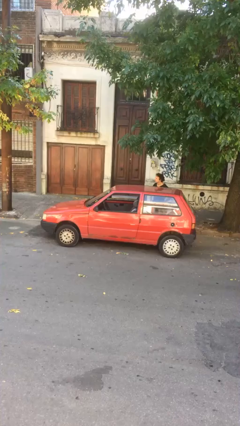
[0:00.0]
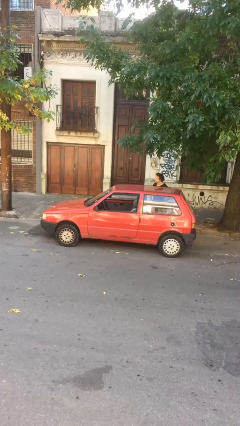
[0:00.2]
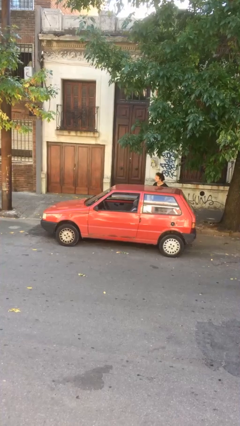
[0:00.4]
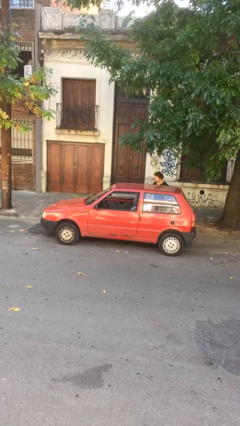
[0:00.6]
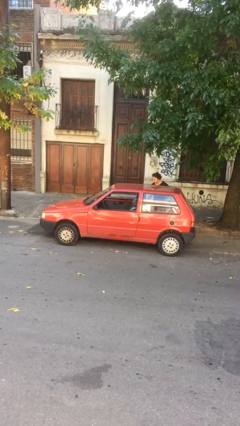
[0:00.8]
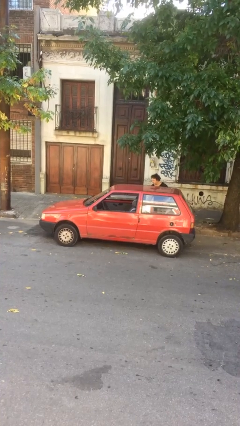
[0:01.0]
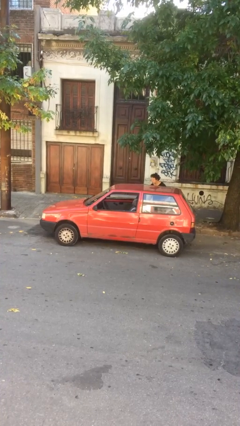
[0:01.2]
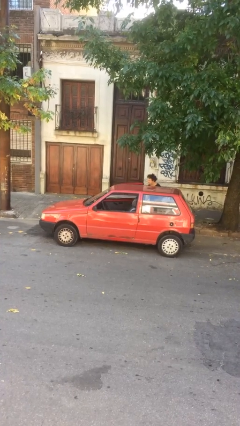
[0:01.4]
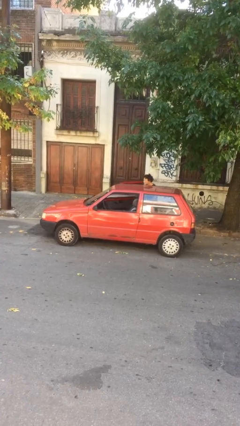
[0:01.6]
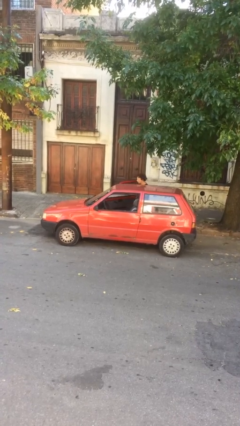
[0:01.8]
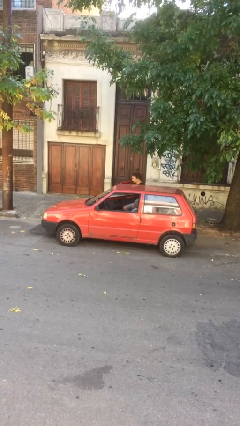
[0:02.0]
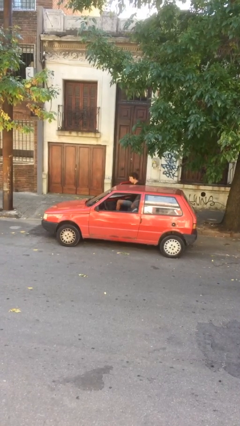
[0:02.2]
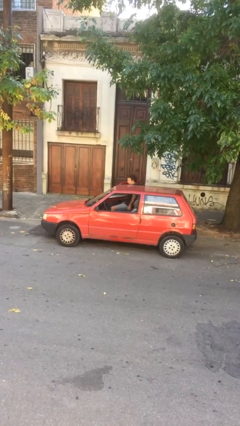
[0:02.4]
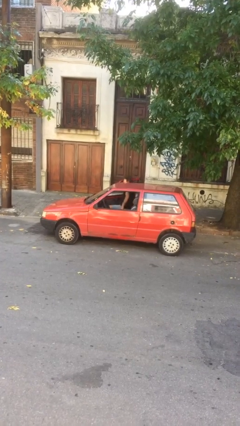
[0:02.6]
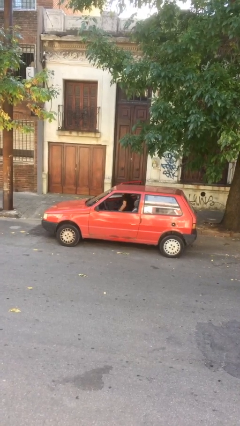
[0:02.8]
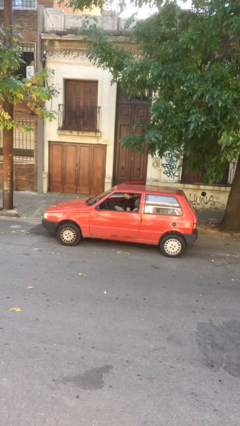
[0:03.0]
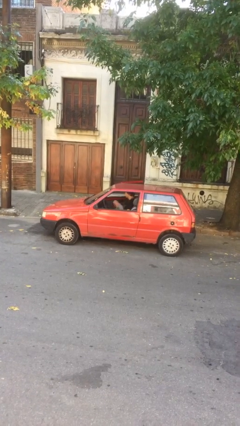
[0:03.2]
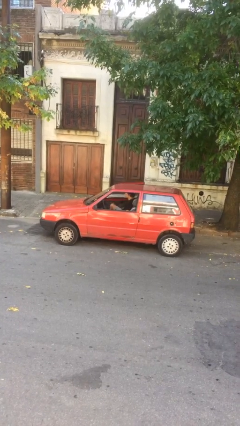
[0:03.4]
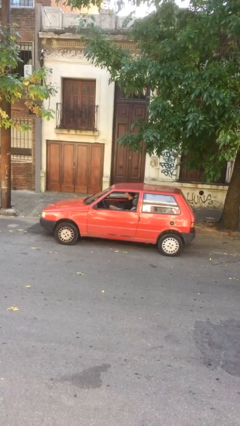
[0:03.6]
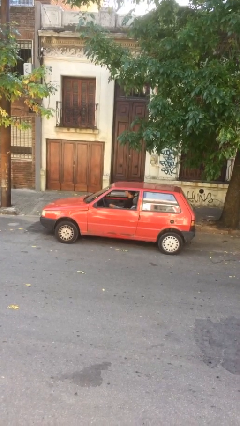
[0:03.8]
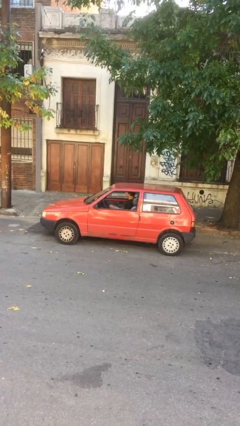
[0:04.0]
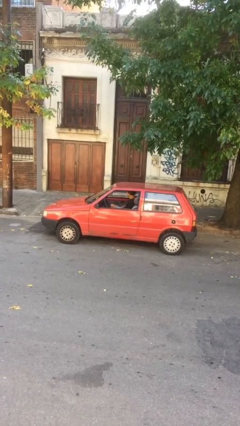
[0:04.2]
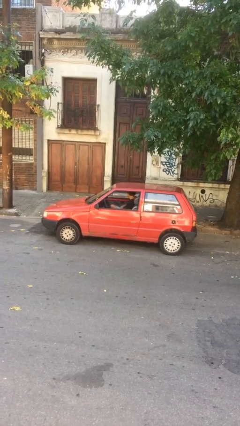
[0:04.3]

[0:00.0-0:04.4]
car picks up person

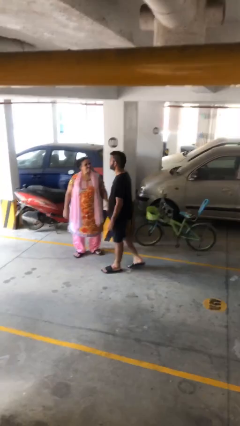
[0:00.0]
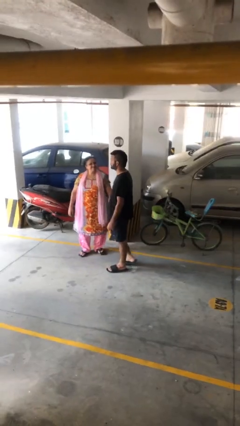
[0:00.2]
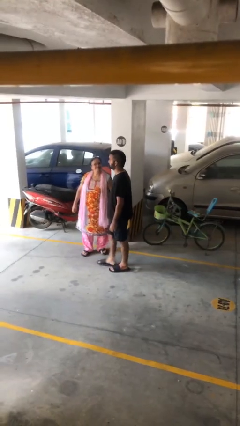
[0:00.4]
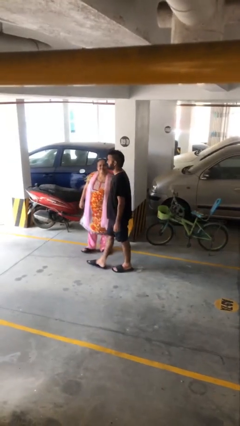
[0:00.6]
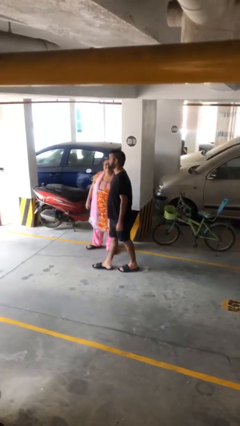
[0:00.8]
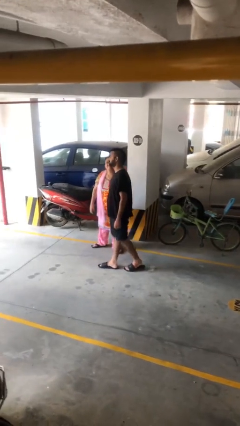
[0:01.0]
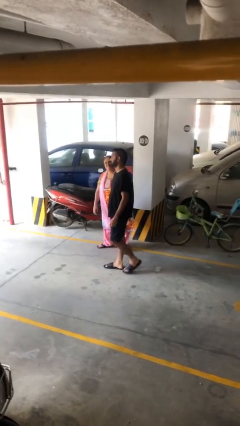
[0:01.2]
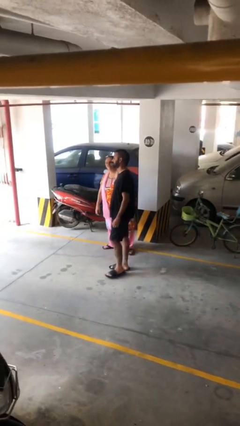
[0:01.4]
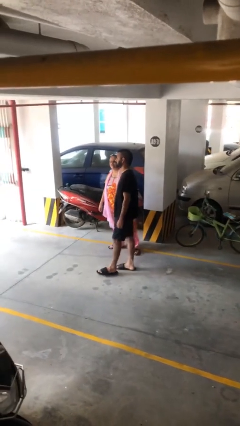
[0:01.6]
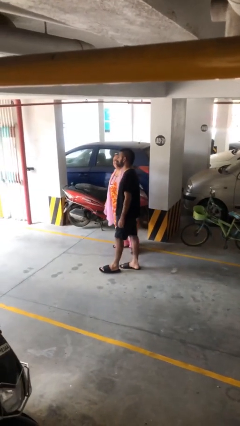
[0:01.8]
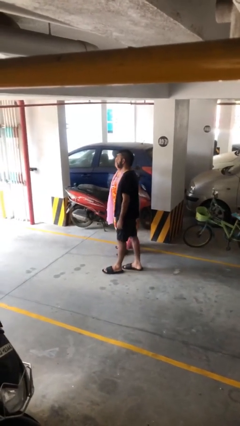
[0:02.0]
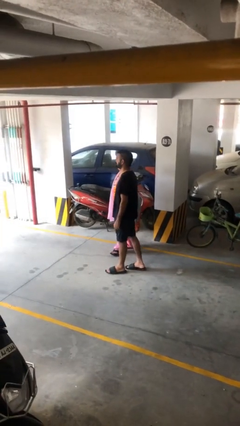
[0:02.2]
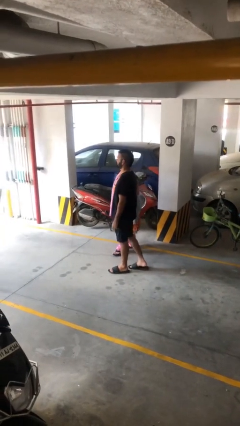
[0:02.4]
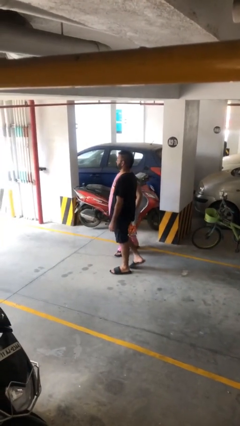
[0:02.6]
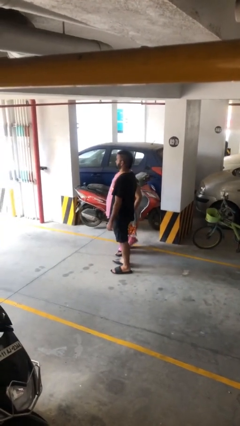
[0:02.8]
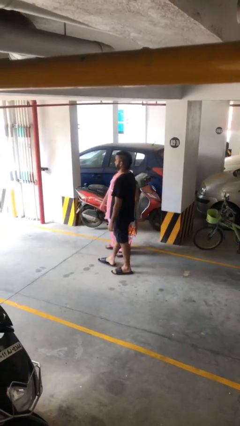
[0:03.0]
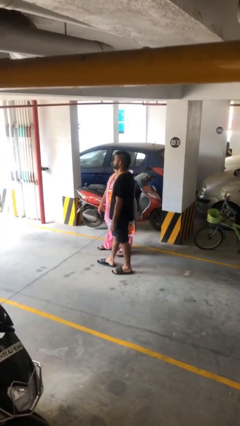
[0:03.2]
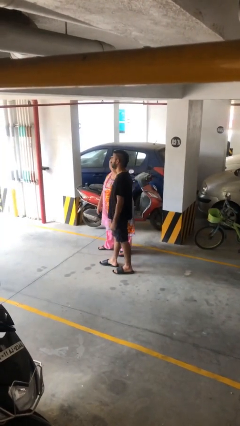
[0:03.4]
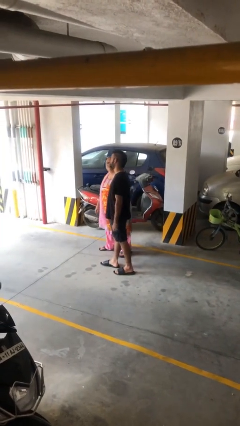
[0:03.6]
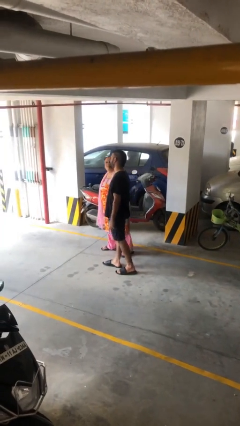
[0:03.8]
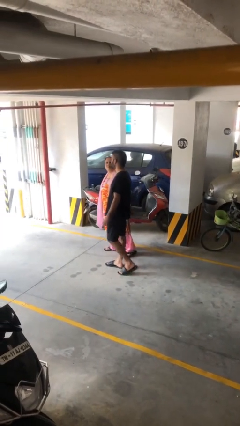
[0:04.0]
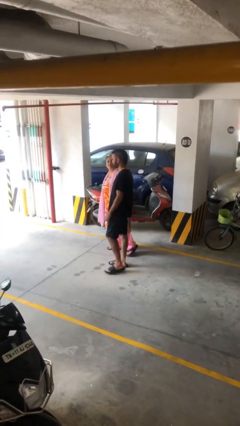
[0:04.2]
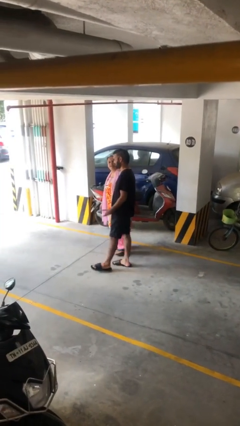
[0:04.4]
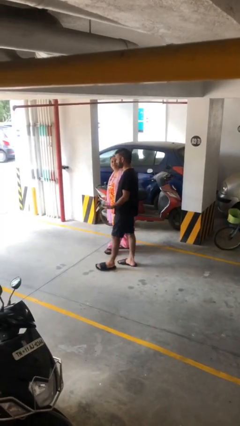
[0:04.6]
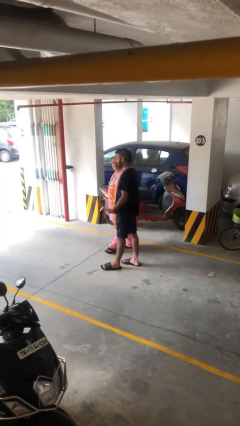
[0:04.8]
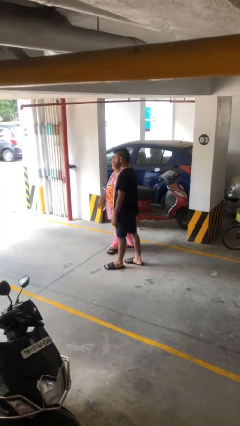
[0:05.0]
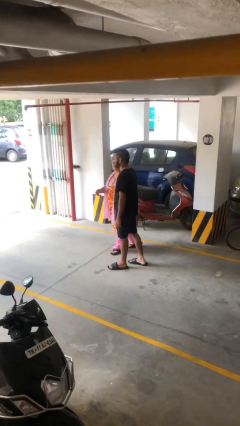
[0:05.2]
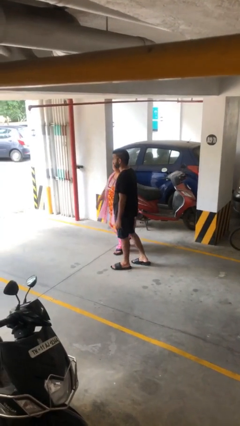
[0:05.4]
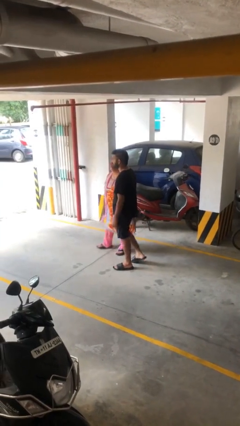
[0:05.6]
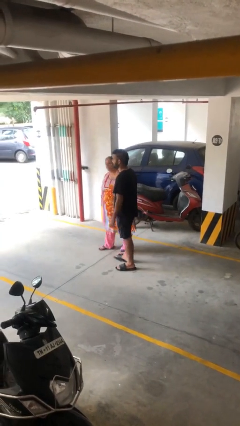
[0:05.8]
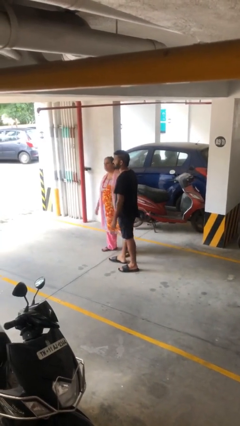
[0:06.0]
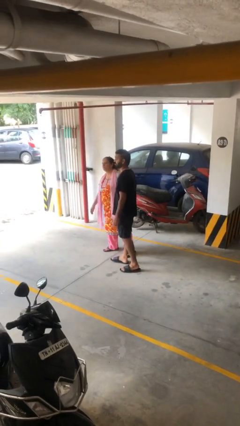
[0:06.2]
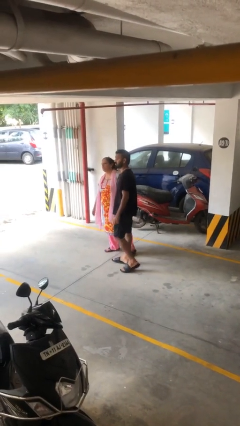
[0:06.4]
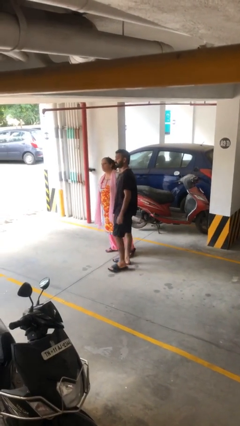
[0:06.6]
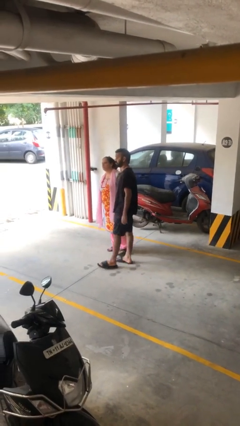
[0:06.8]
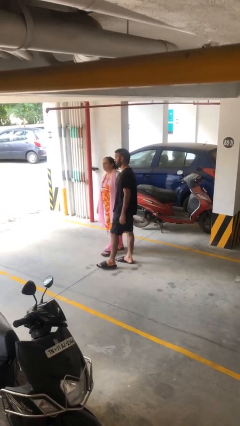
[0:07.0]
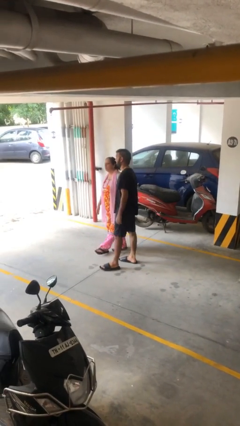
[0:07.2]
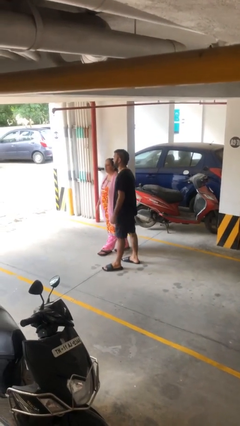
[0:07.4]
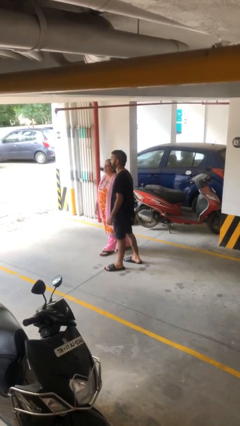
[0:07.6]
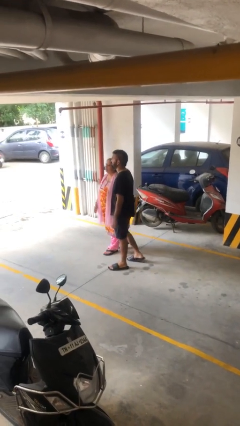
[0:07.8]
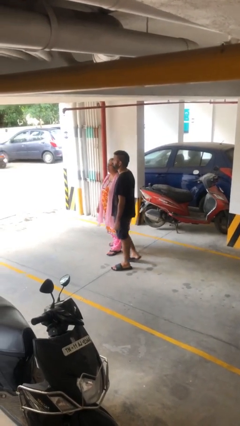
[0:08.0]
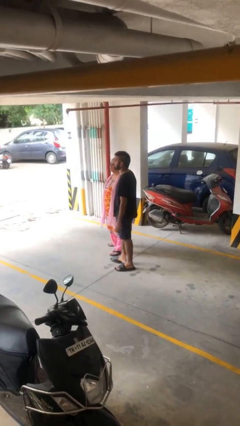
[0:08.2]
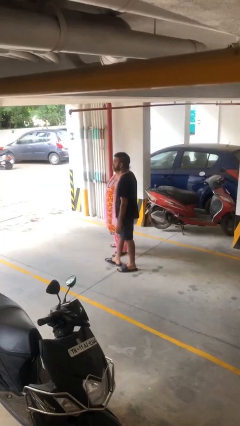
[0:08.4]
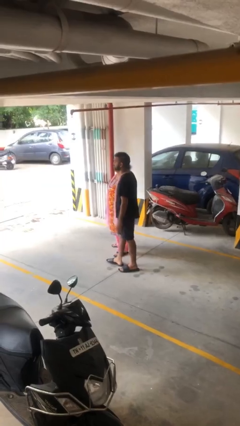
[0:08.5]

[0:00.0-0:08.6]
person holds hand

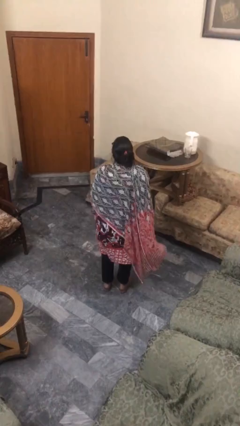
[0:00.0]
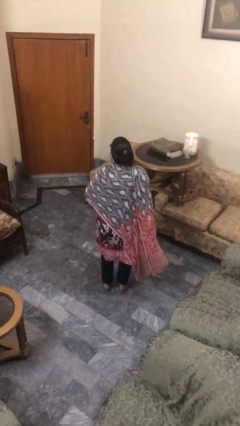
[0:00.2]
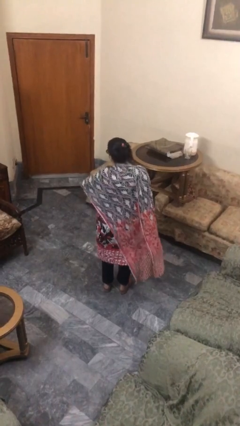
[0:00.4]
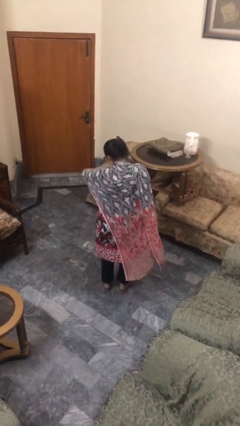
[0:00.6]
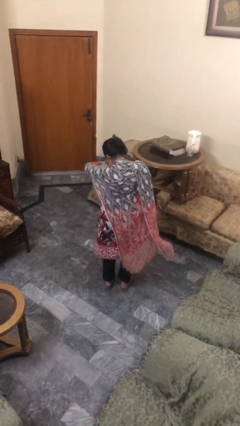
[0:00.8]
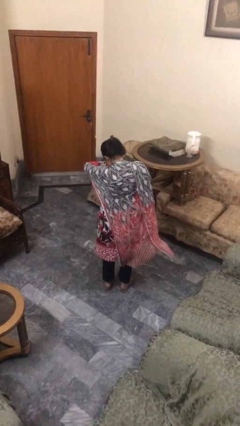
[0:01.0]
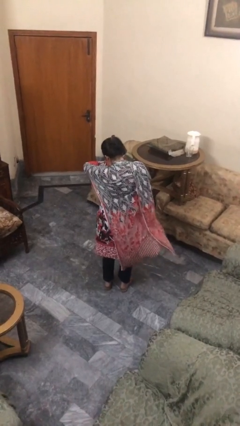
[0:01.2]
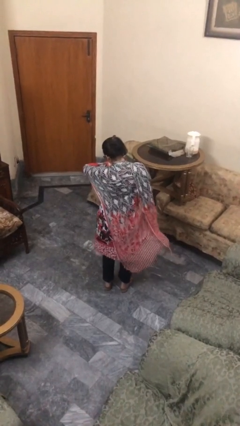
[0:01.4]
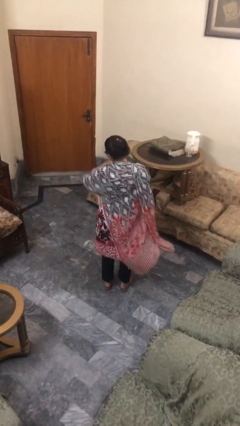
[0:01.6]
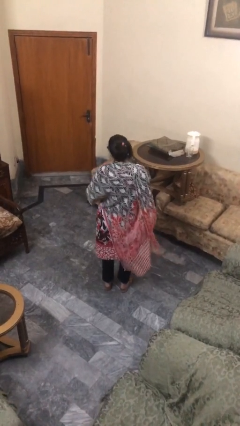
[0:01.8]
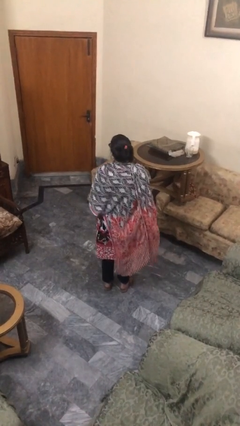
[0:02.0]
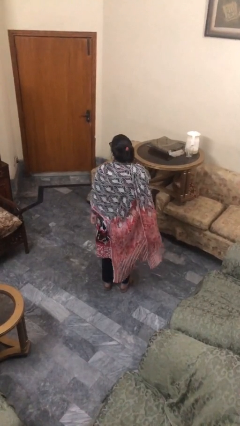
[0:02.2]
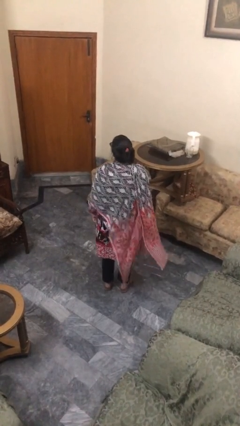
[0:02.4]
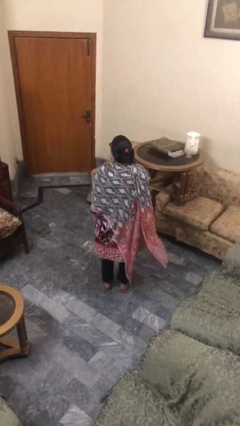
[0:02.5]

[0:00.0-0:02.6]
person sneezes into arm

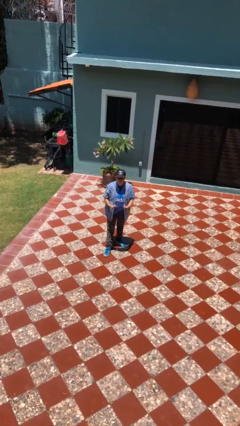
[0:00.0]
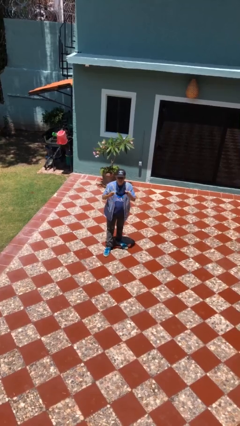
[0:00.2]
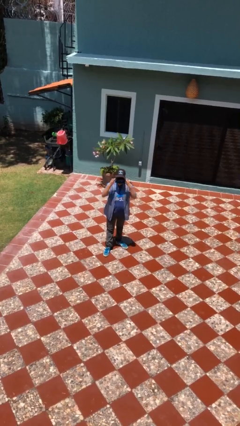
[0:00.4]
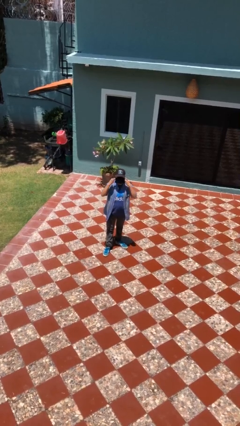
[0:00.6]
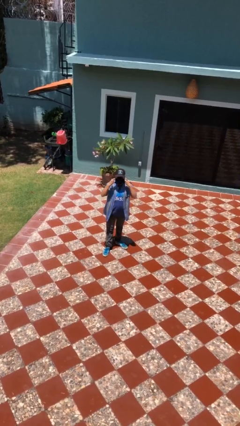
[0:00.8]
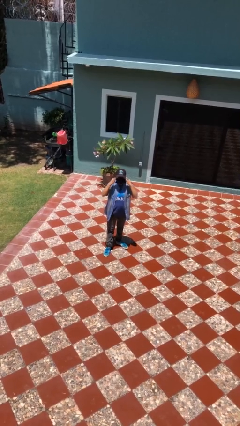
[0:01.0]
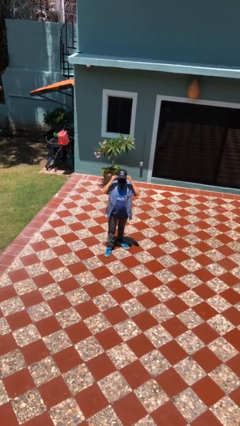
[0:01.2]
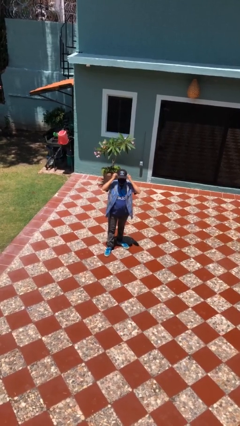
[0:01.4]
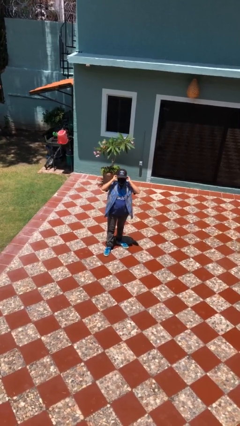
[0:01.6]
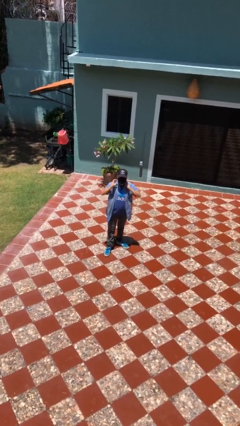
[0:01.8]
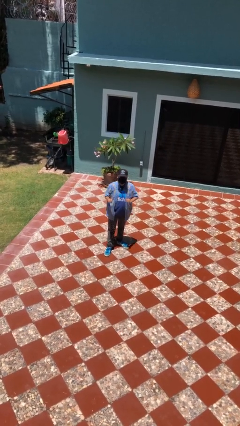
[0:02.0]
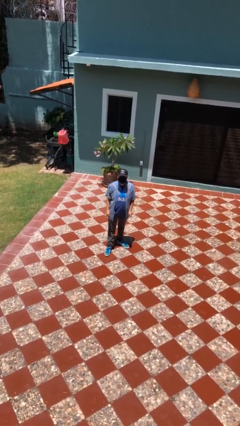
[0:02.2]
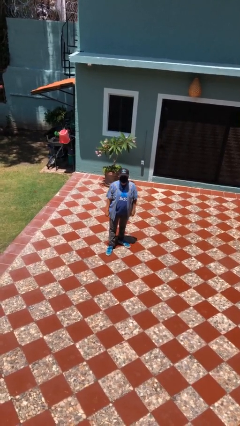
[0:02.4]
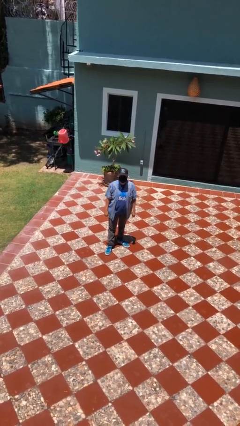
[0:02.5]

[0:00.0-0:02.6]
person puts on facemask
